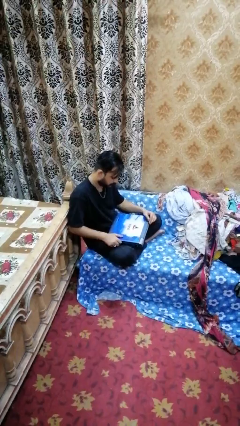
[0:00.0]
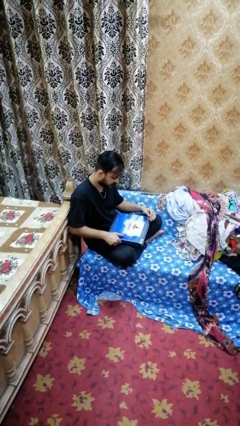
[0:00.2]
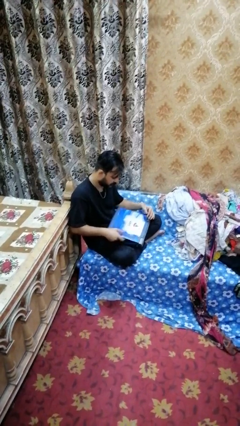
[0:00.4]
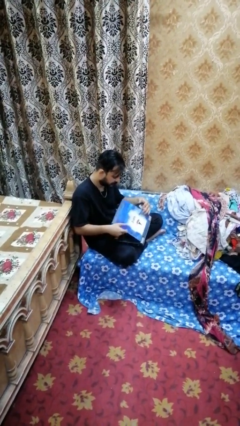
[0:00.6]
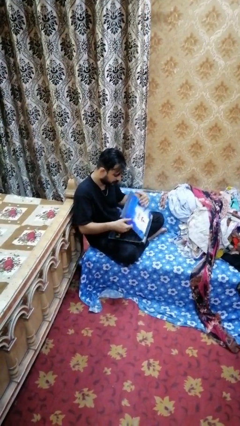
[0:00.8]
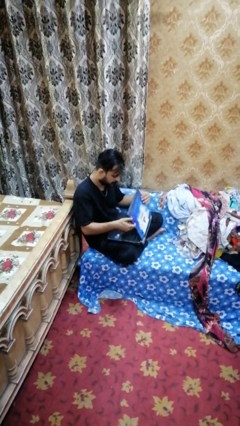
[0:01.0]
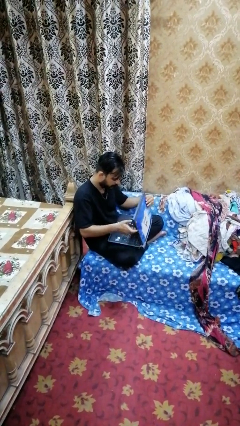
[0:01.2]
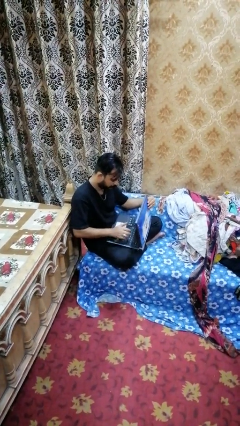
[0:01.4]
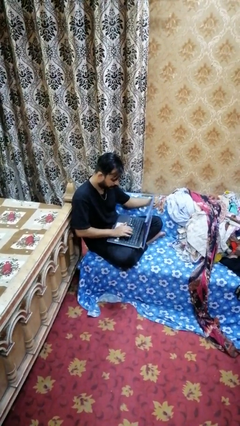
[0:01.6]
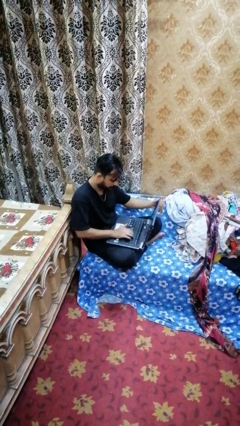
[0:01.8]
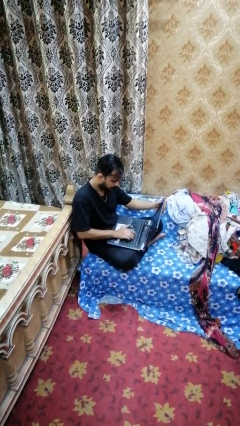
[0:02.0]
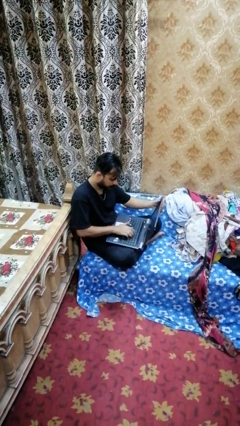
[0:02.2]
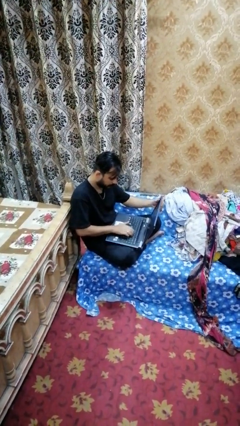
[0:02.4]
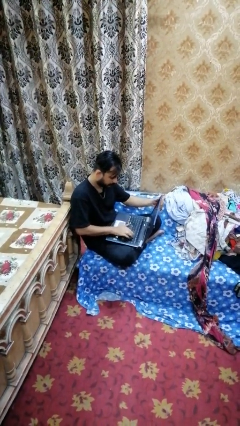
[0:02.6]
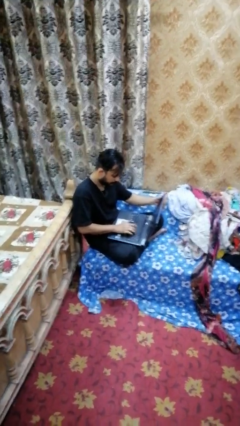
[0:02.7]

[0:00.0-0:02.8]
person opens laptop

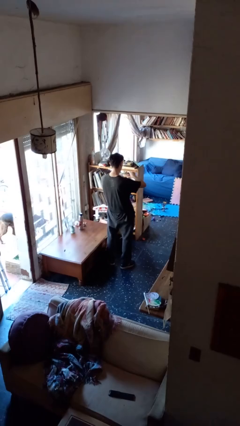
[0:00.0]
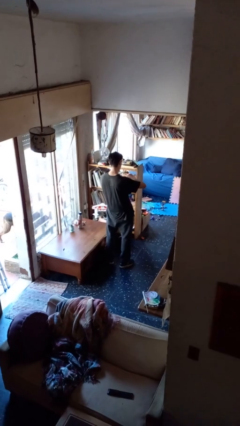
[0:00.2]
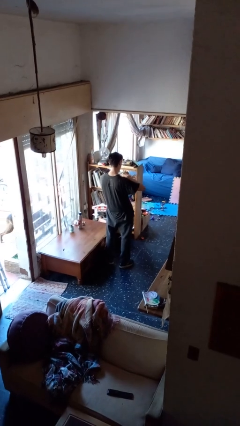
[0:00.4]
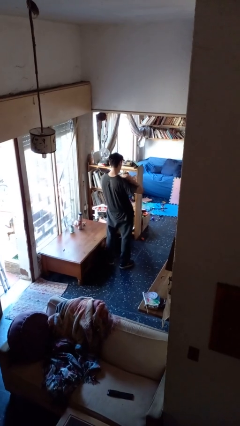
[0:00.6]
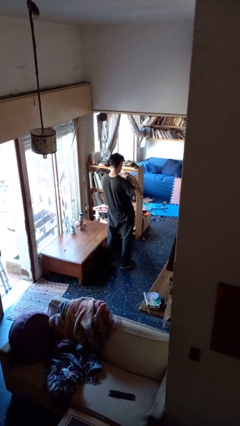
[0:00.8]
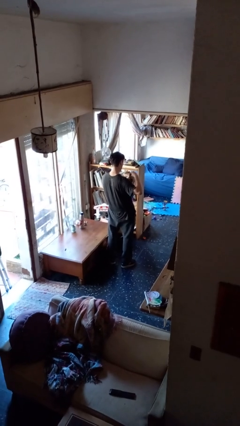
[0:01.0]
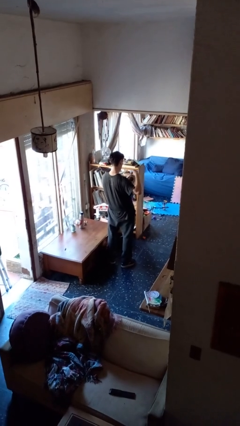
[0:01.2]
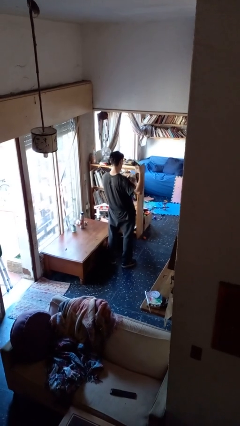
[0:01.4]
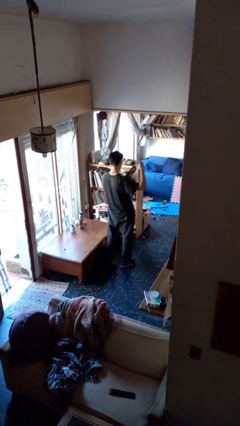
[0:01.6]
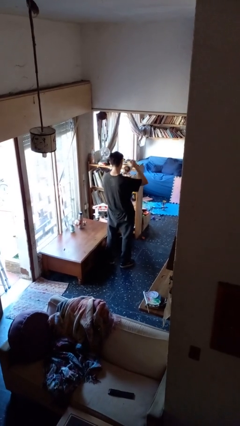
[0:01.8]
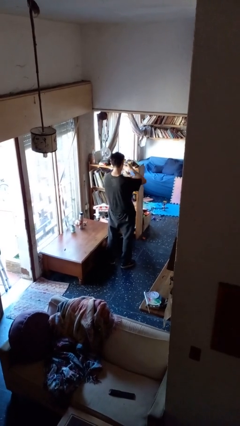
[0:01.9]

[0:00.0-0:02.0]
person tears paper

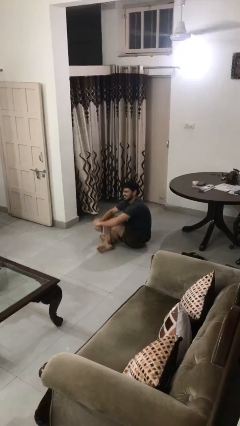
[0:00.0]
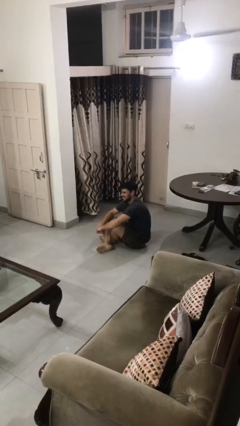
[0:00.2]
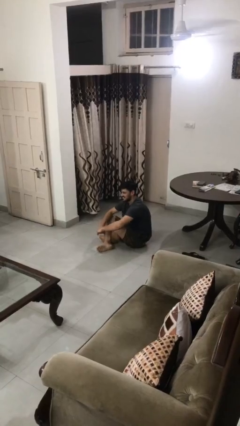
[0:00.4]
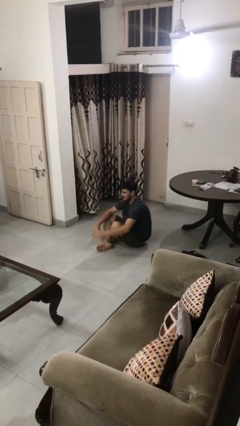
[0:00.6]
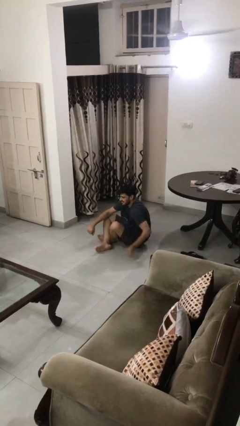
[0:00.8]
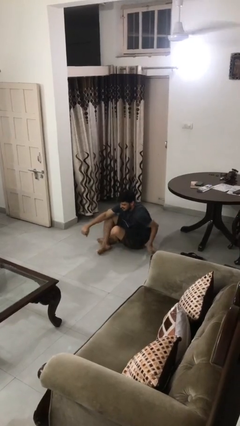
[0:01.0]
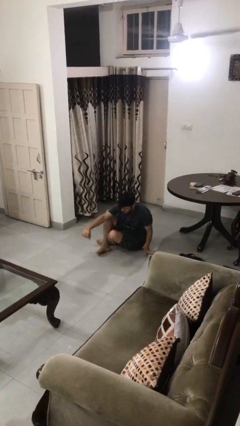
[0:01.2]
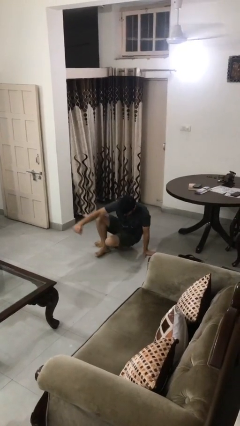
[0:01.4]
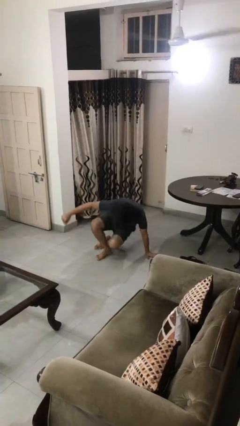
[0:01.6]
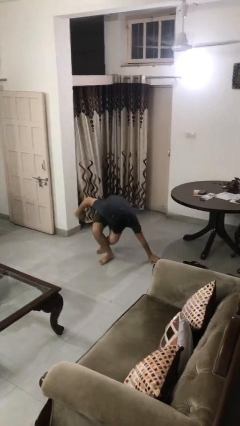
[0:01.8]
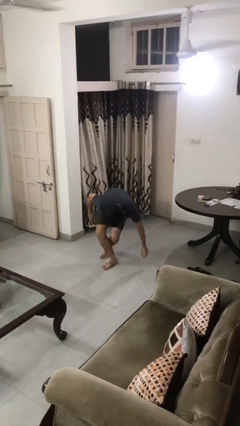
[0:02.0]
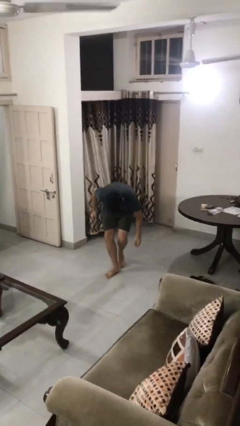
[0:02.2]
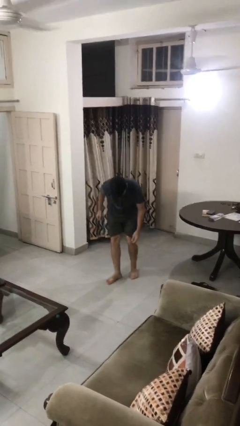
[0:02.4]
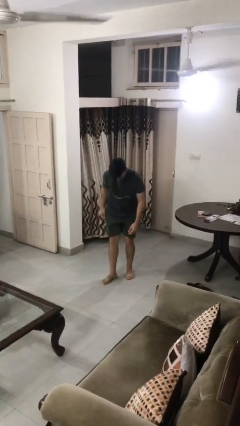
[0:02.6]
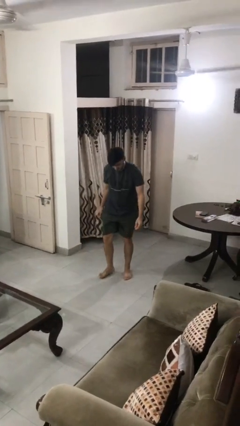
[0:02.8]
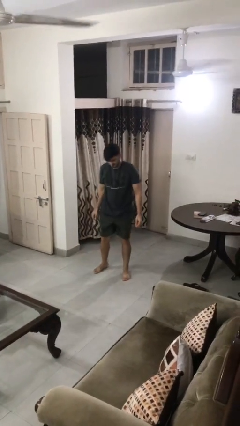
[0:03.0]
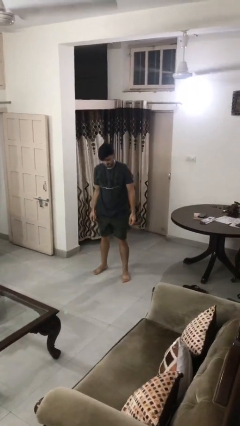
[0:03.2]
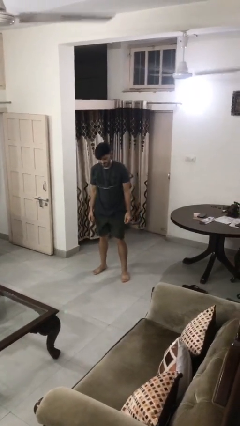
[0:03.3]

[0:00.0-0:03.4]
person stands up from floor

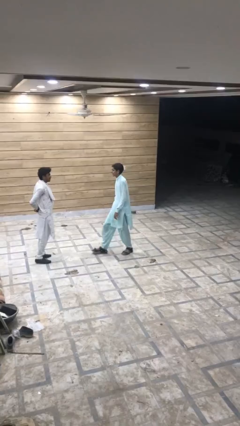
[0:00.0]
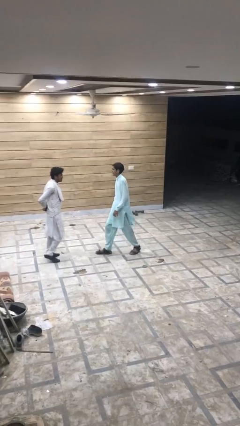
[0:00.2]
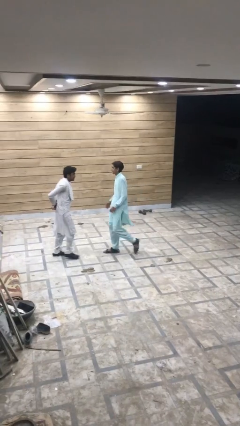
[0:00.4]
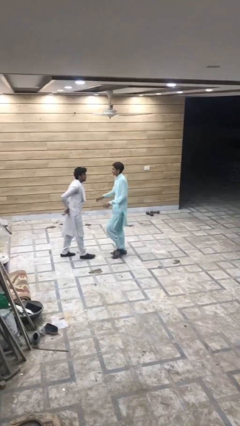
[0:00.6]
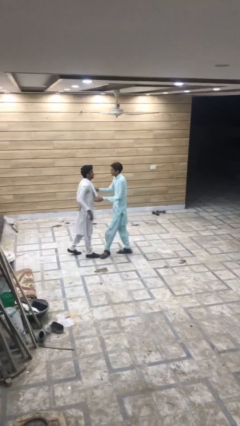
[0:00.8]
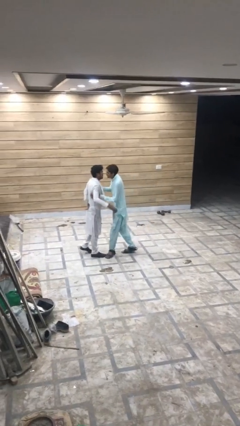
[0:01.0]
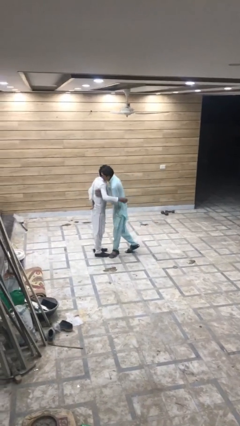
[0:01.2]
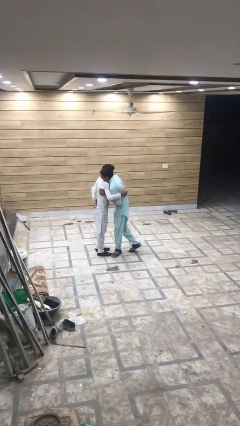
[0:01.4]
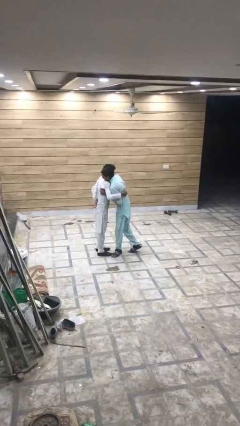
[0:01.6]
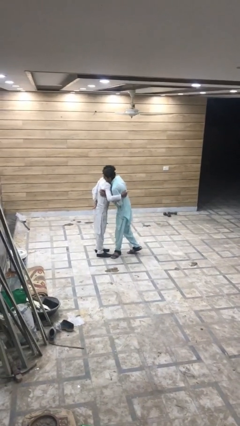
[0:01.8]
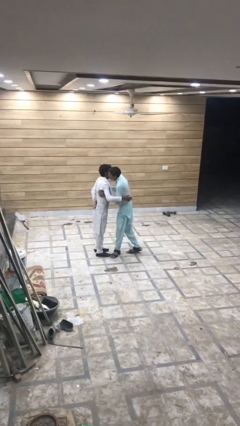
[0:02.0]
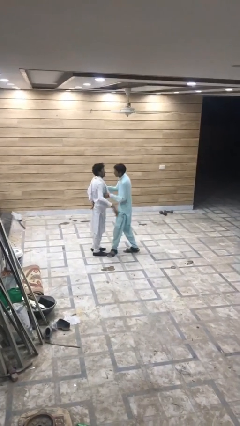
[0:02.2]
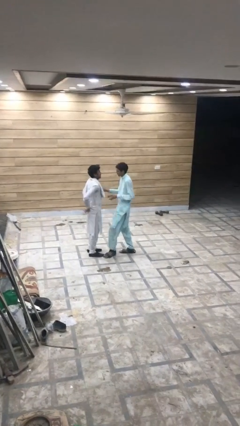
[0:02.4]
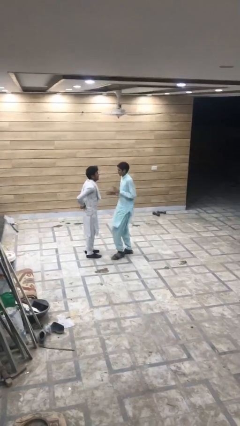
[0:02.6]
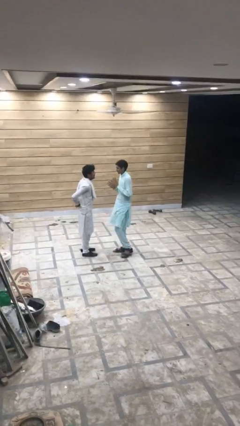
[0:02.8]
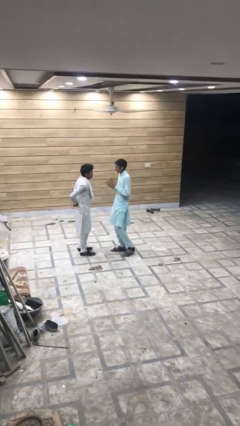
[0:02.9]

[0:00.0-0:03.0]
person embraces person

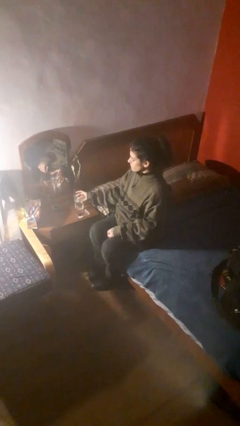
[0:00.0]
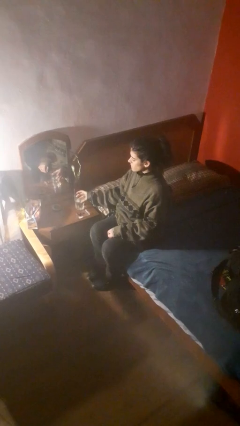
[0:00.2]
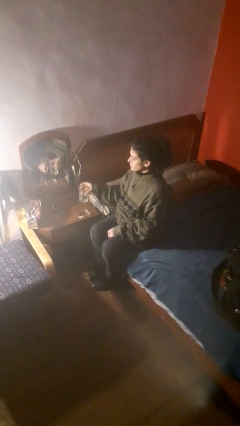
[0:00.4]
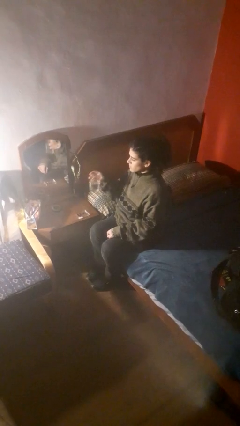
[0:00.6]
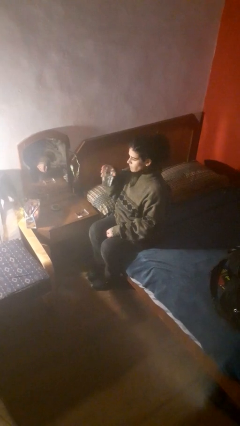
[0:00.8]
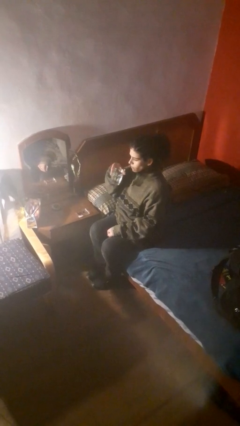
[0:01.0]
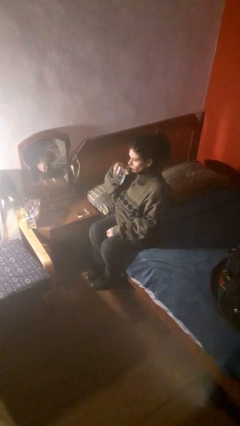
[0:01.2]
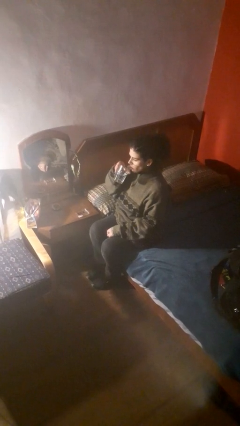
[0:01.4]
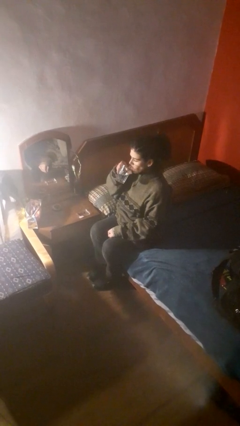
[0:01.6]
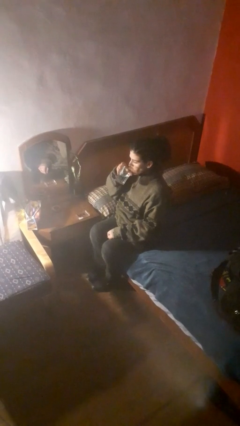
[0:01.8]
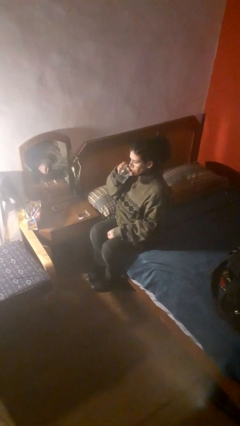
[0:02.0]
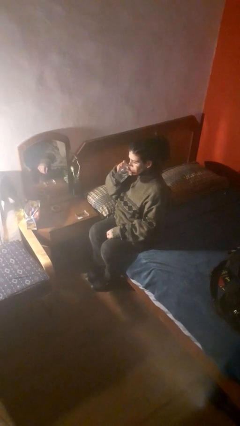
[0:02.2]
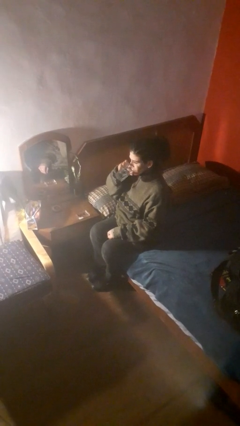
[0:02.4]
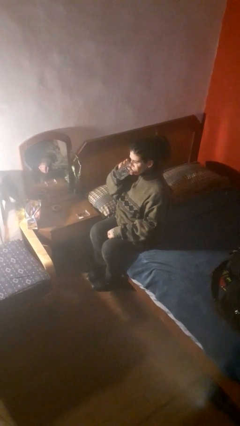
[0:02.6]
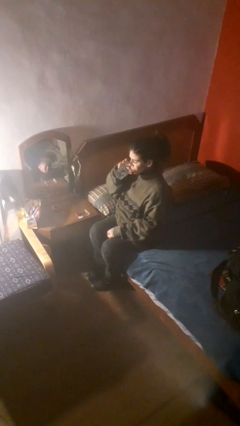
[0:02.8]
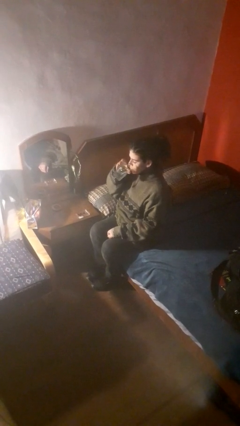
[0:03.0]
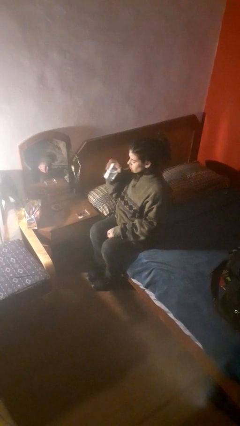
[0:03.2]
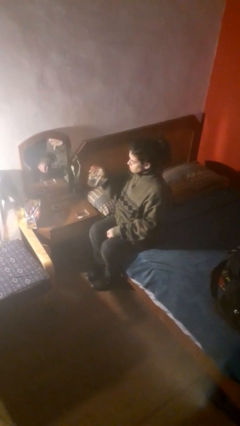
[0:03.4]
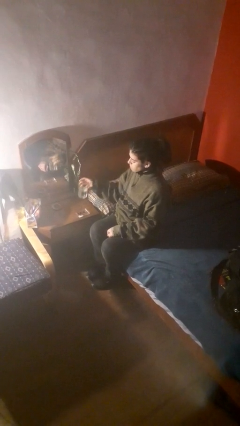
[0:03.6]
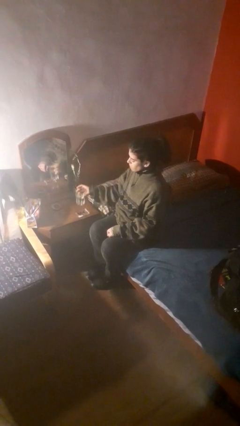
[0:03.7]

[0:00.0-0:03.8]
person drinks from cup

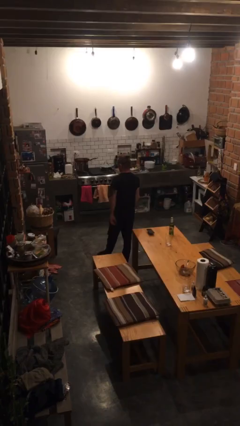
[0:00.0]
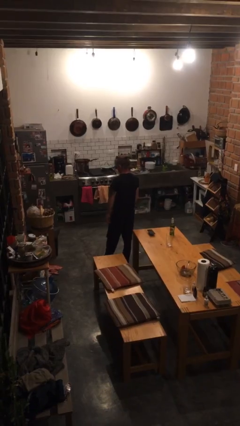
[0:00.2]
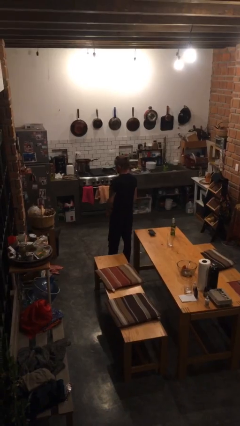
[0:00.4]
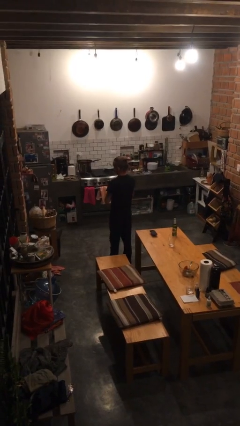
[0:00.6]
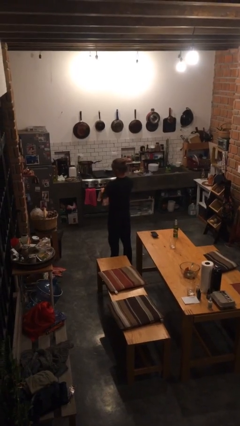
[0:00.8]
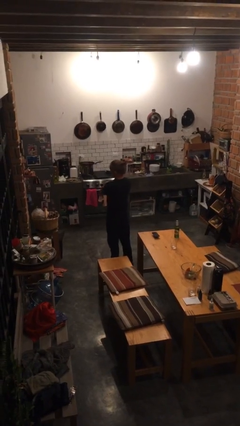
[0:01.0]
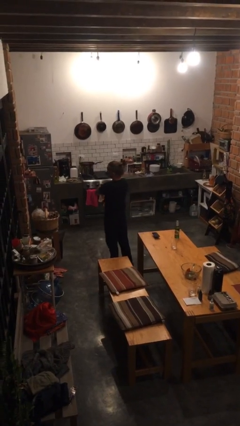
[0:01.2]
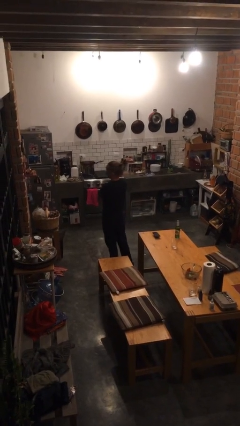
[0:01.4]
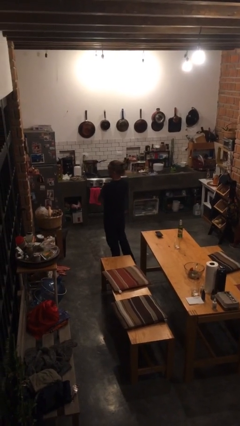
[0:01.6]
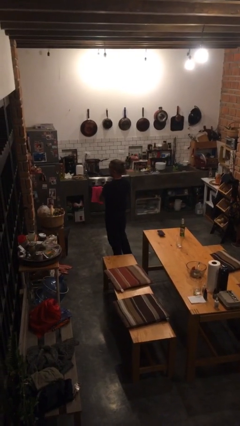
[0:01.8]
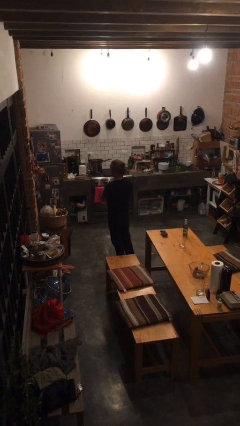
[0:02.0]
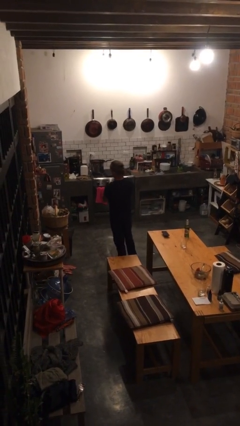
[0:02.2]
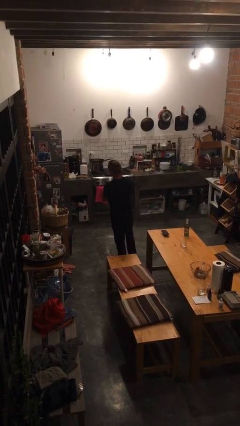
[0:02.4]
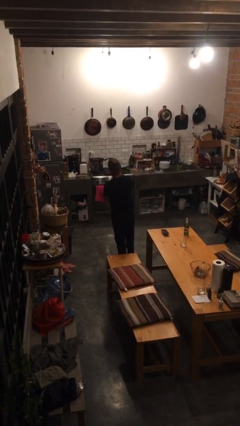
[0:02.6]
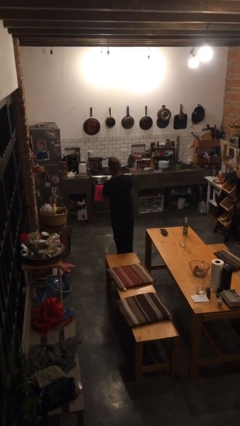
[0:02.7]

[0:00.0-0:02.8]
person gestures arms x
